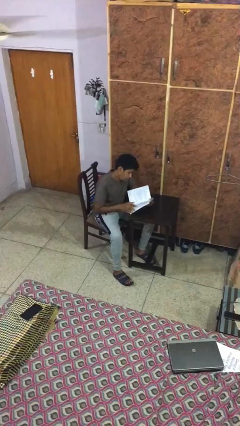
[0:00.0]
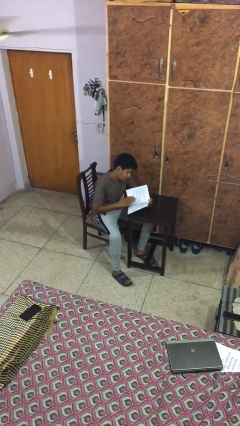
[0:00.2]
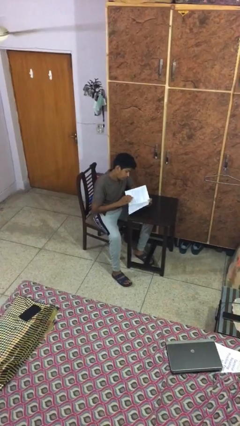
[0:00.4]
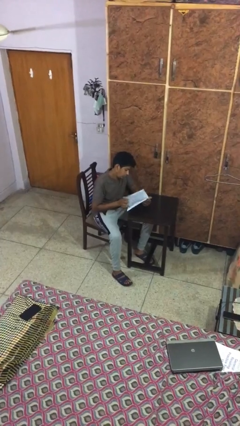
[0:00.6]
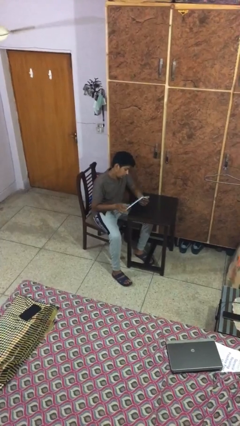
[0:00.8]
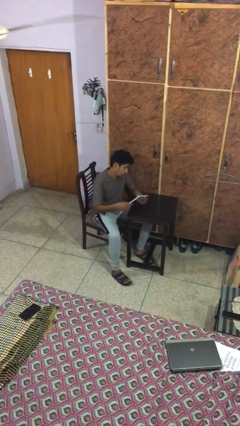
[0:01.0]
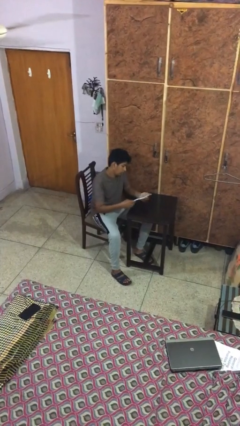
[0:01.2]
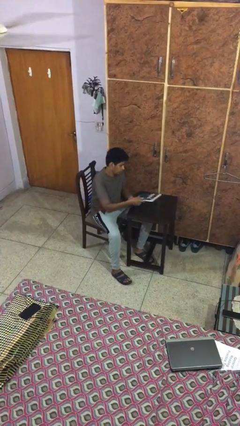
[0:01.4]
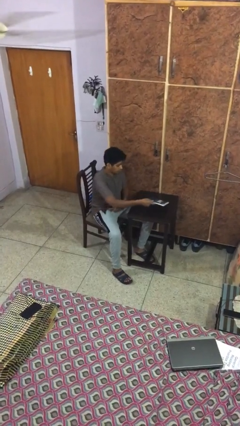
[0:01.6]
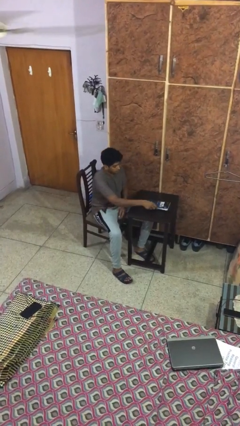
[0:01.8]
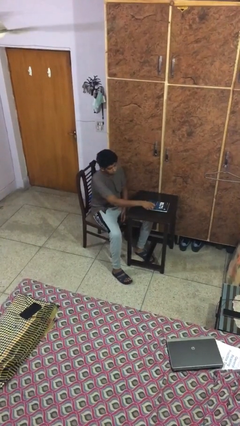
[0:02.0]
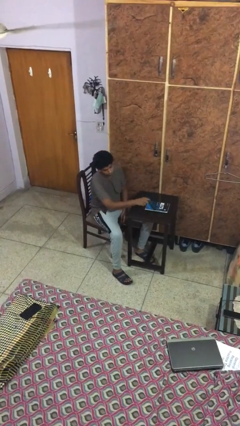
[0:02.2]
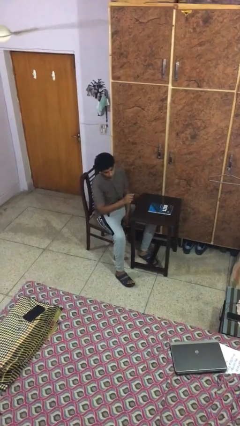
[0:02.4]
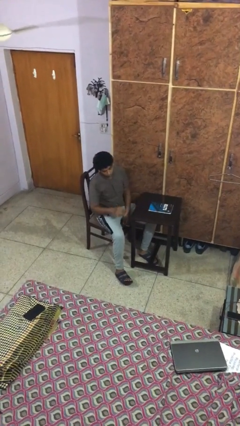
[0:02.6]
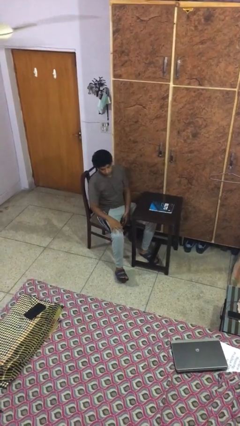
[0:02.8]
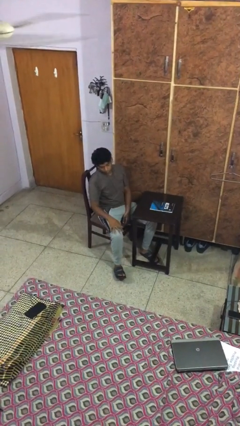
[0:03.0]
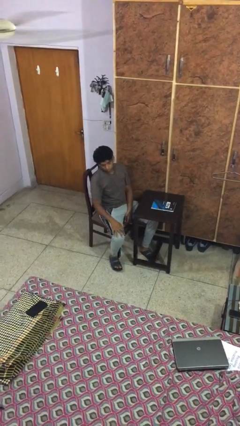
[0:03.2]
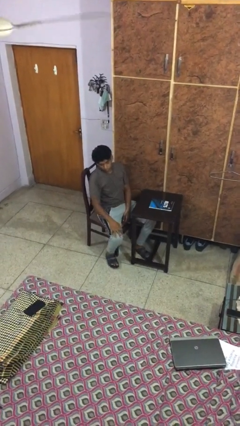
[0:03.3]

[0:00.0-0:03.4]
person puts down object on table

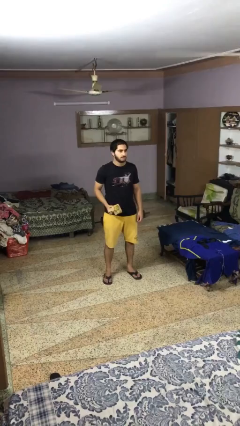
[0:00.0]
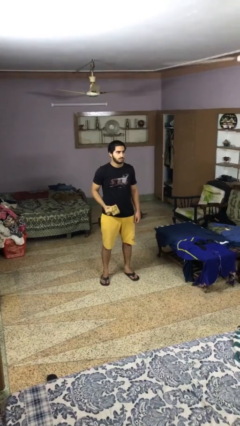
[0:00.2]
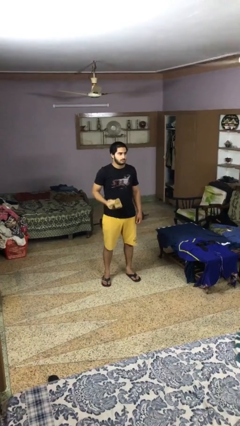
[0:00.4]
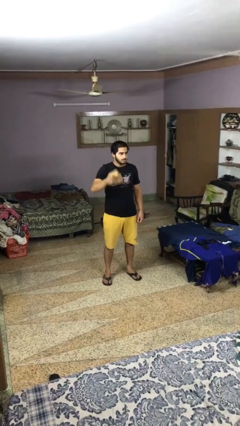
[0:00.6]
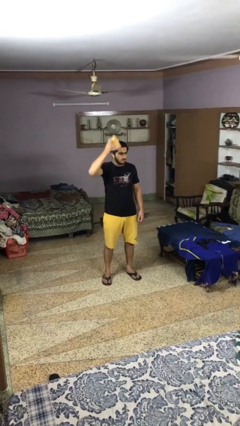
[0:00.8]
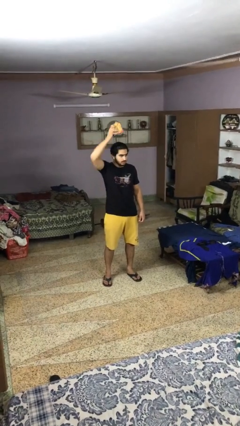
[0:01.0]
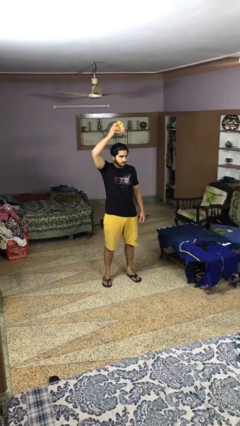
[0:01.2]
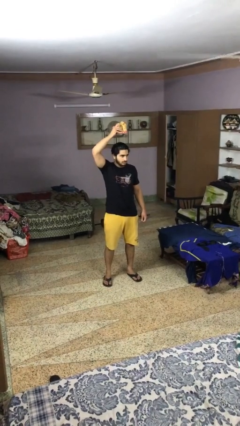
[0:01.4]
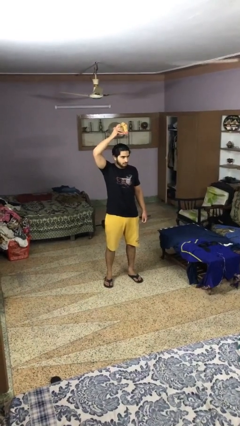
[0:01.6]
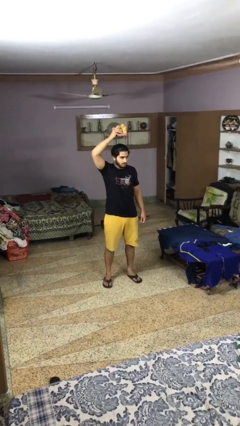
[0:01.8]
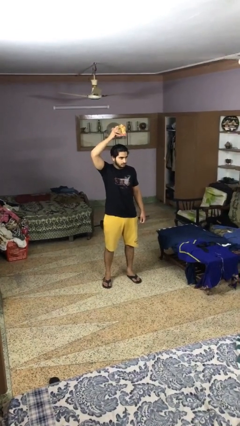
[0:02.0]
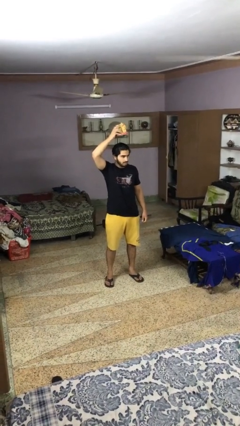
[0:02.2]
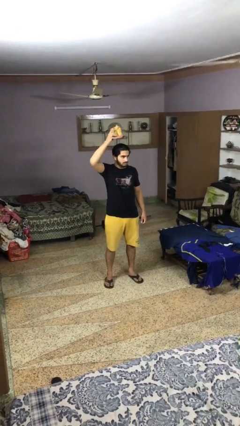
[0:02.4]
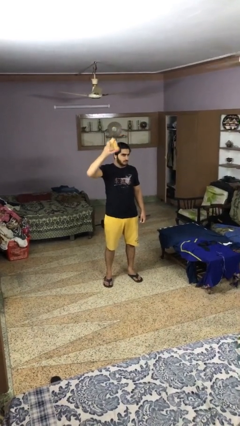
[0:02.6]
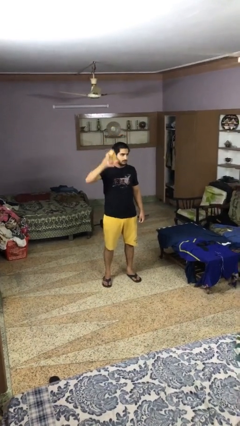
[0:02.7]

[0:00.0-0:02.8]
person holds object above head

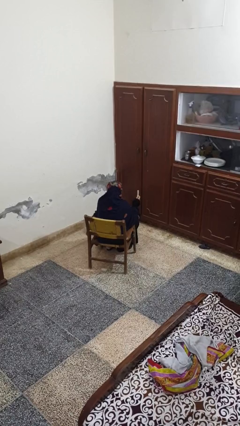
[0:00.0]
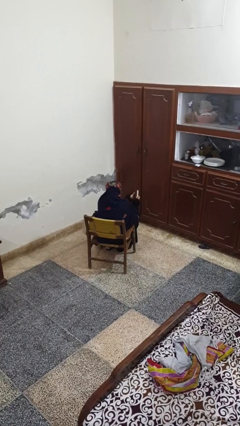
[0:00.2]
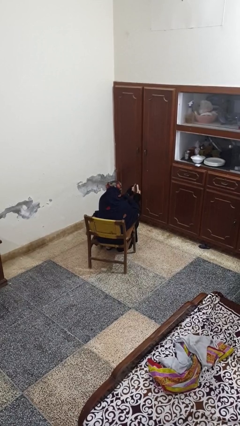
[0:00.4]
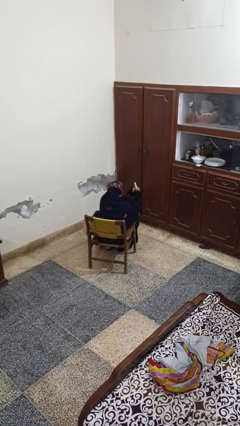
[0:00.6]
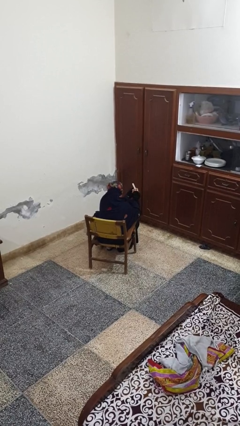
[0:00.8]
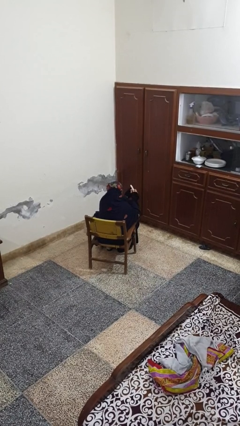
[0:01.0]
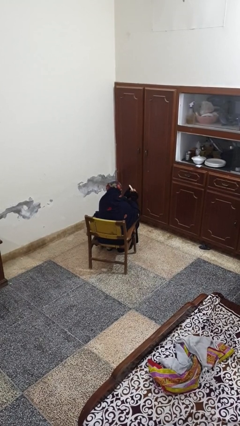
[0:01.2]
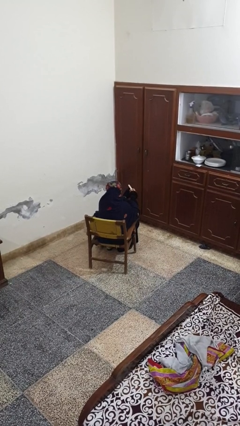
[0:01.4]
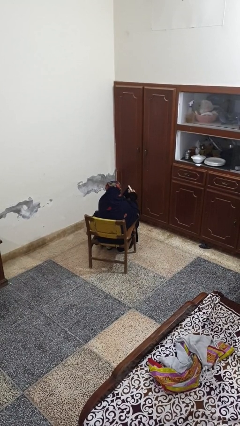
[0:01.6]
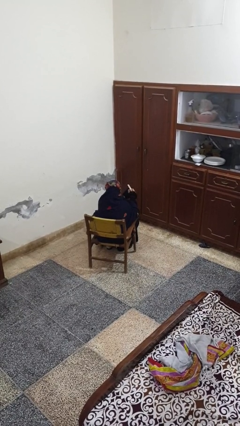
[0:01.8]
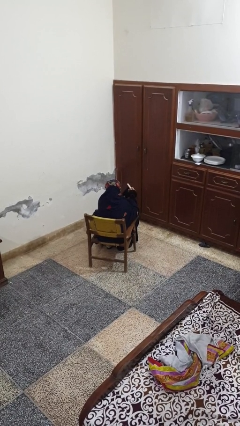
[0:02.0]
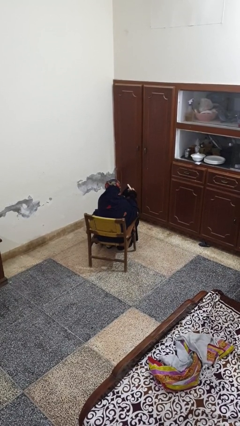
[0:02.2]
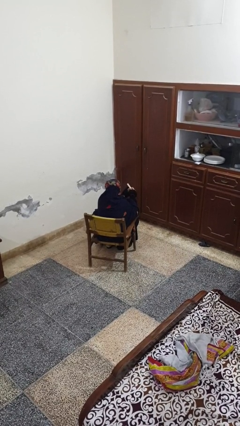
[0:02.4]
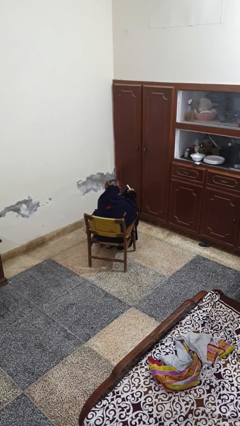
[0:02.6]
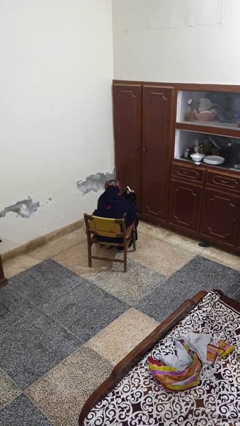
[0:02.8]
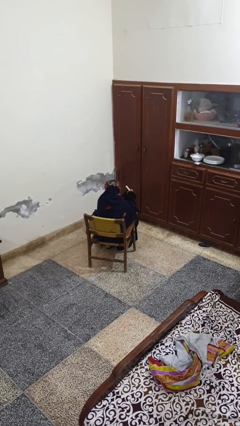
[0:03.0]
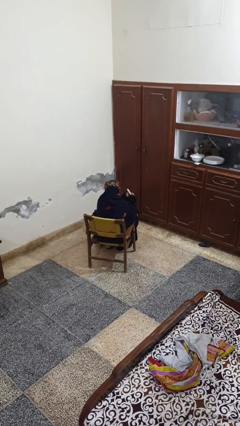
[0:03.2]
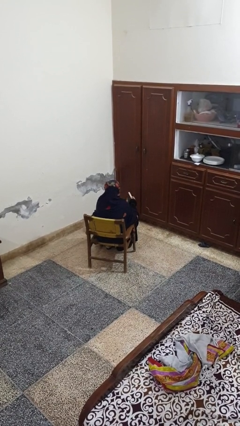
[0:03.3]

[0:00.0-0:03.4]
person files fingernails

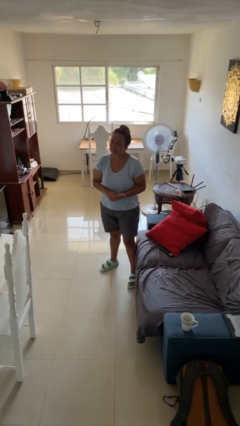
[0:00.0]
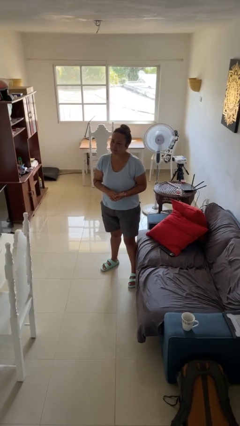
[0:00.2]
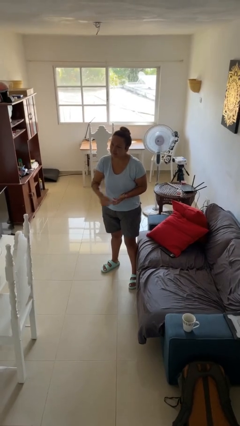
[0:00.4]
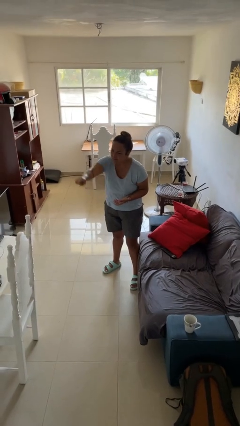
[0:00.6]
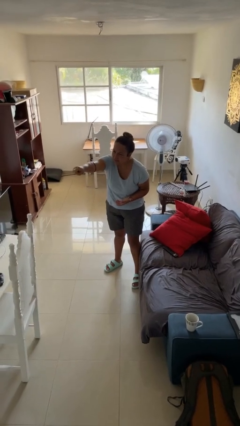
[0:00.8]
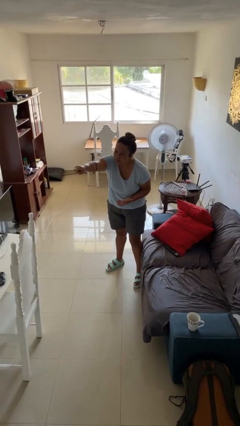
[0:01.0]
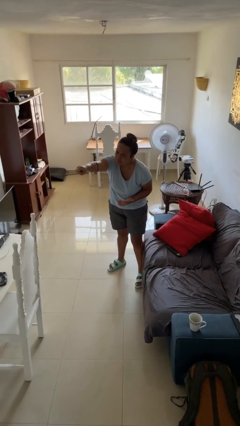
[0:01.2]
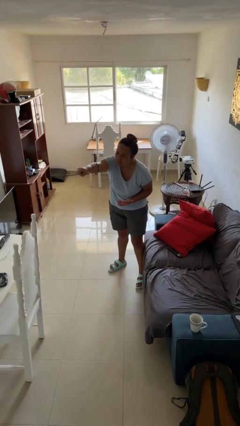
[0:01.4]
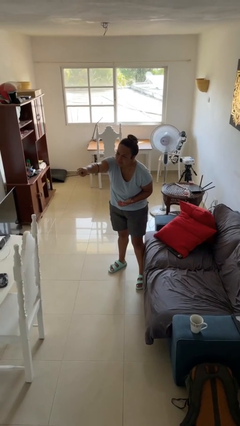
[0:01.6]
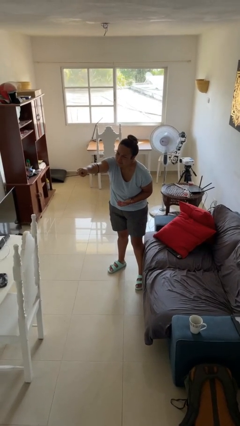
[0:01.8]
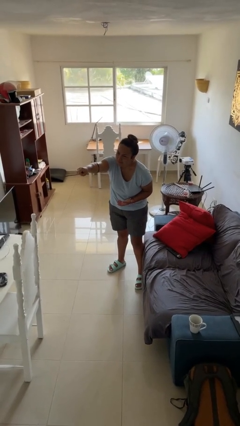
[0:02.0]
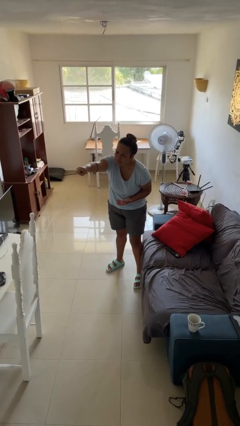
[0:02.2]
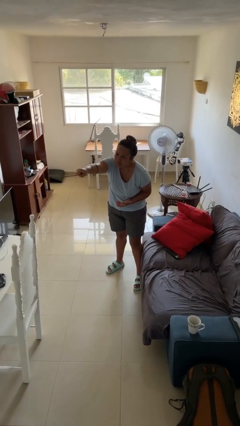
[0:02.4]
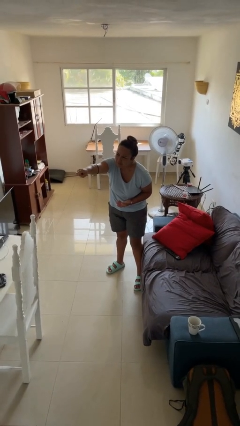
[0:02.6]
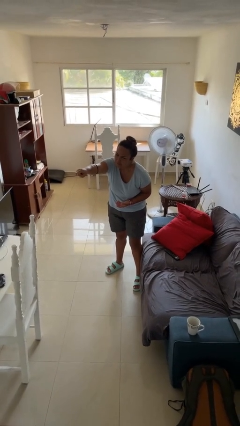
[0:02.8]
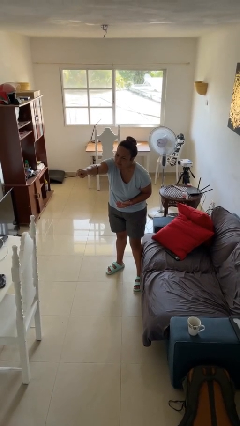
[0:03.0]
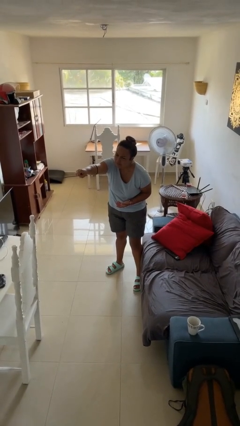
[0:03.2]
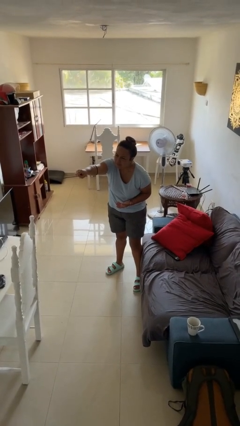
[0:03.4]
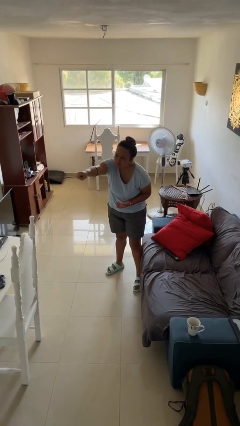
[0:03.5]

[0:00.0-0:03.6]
person points at person

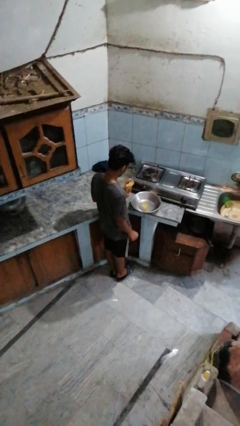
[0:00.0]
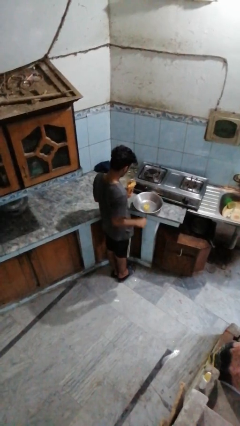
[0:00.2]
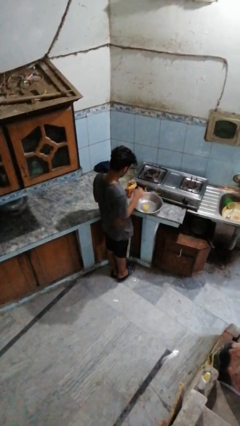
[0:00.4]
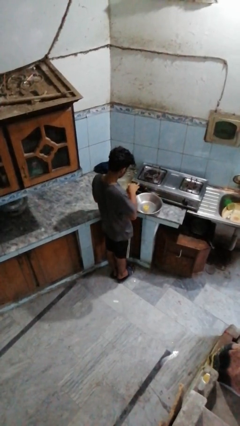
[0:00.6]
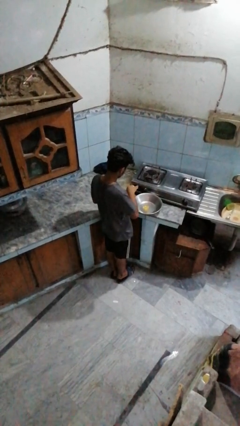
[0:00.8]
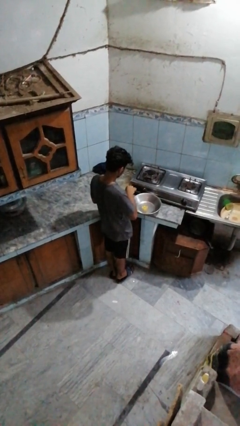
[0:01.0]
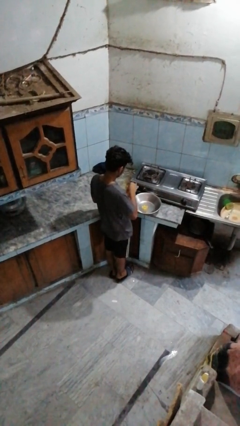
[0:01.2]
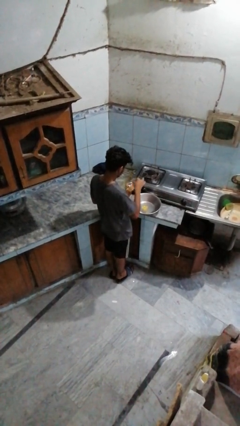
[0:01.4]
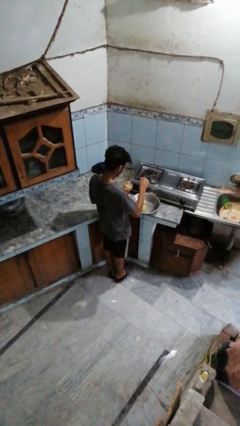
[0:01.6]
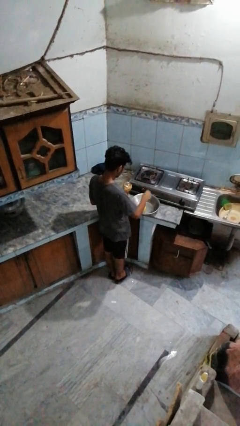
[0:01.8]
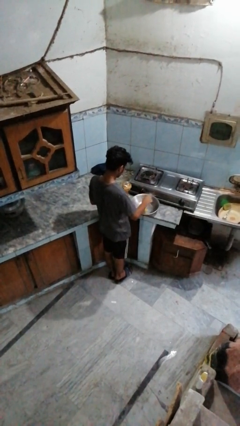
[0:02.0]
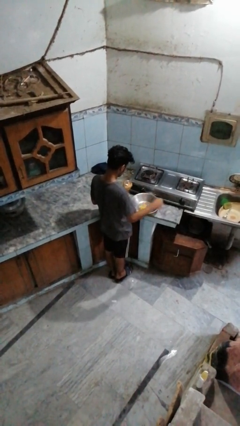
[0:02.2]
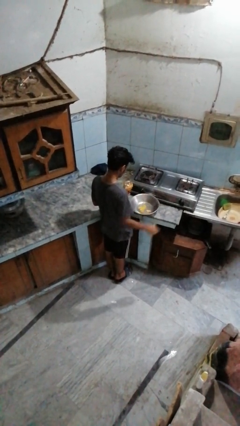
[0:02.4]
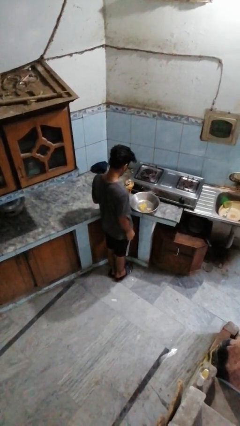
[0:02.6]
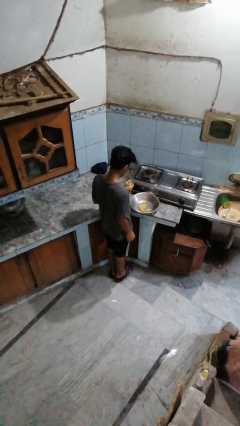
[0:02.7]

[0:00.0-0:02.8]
person pours into bowl

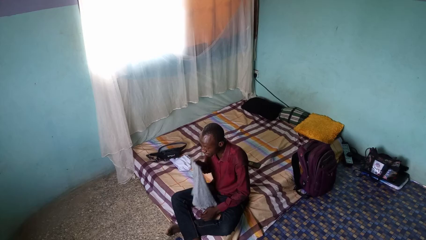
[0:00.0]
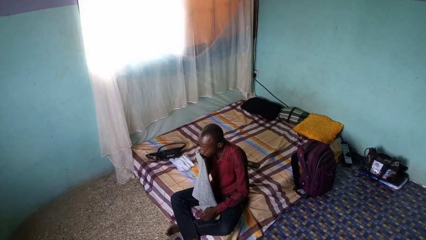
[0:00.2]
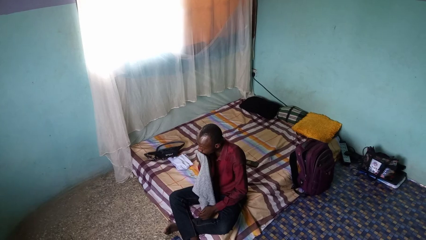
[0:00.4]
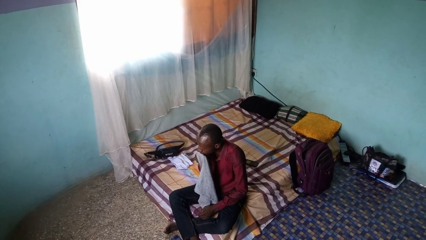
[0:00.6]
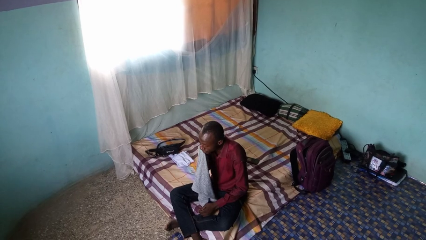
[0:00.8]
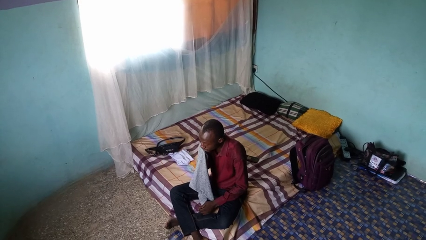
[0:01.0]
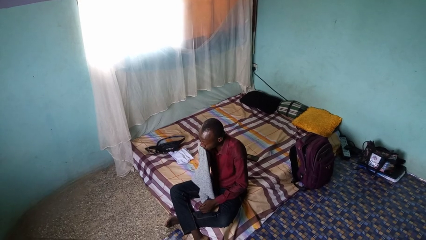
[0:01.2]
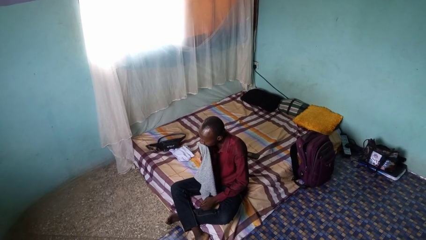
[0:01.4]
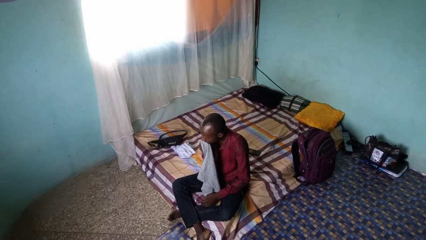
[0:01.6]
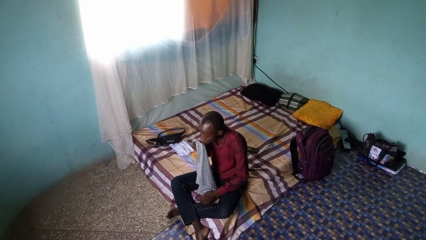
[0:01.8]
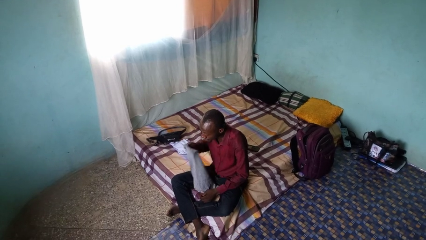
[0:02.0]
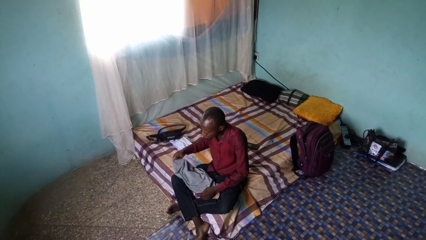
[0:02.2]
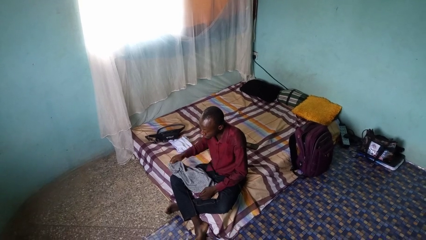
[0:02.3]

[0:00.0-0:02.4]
person wipes mouth with napkin
